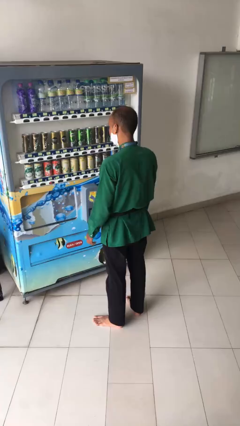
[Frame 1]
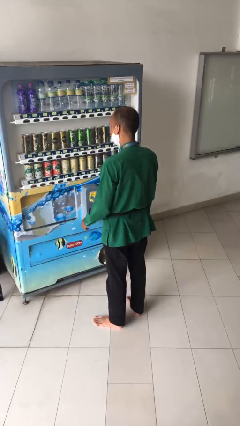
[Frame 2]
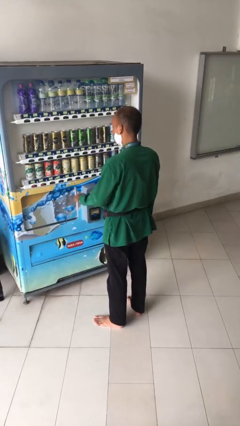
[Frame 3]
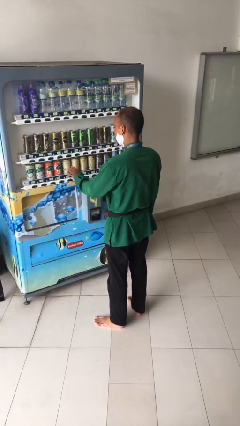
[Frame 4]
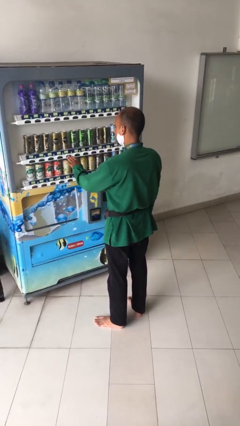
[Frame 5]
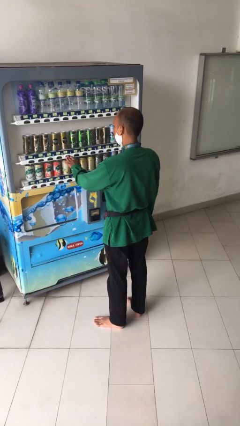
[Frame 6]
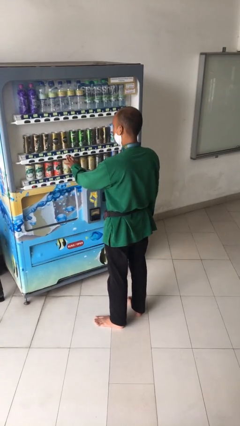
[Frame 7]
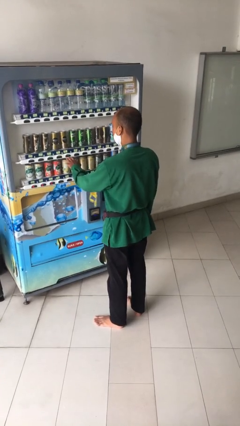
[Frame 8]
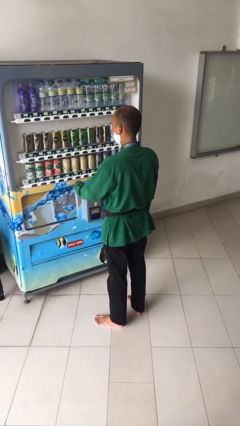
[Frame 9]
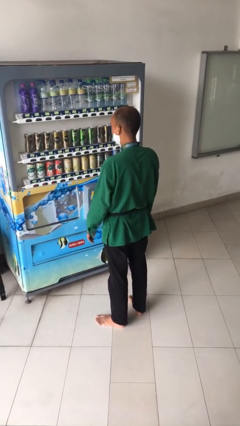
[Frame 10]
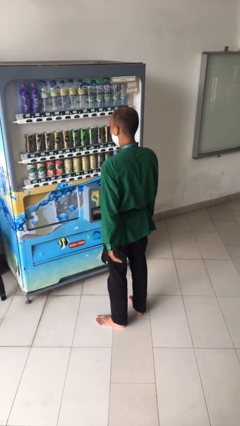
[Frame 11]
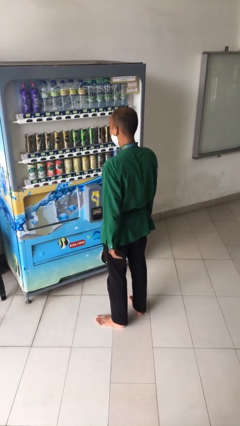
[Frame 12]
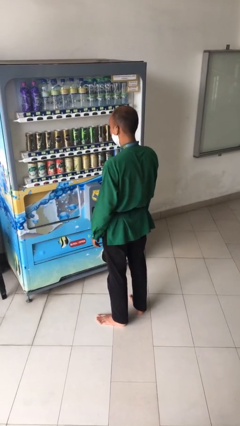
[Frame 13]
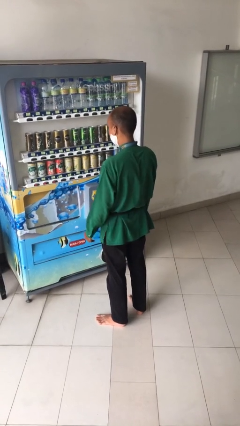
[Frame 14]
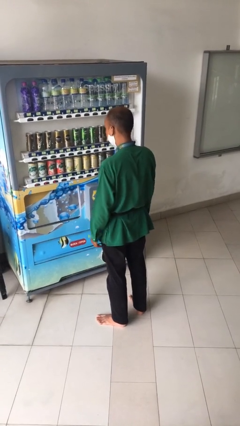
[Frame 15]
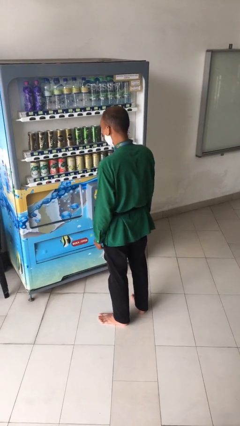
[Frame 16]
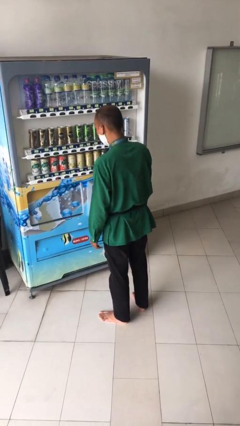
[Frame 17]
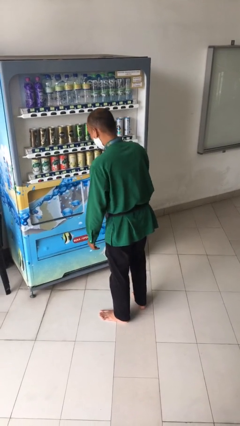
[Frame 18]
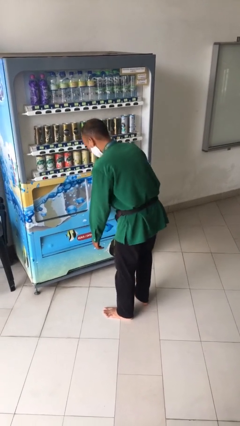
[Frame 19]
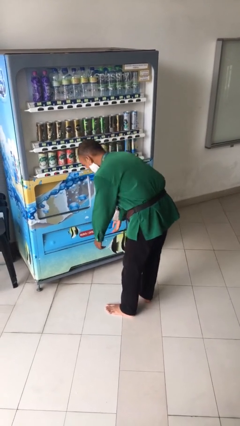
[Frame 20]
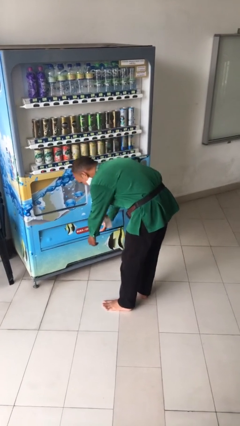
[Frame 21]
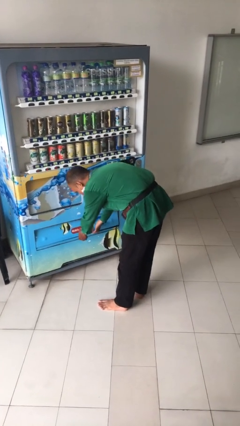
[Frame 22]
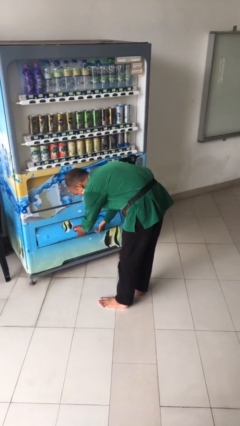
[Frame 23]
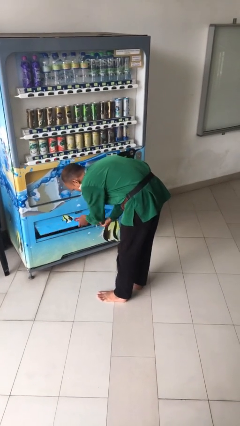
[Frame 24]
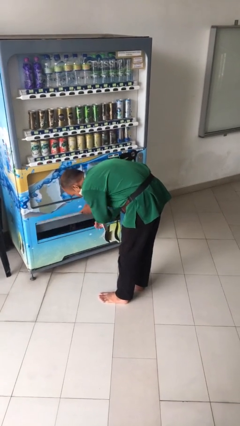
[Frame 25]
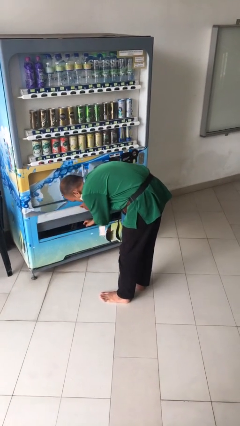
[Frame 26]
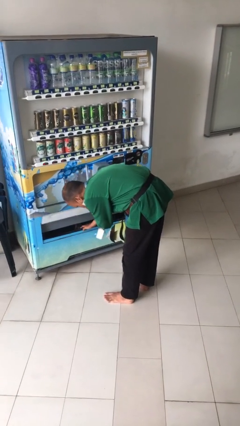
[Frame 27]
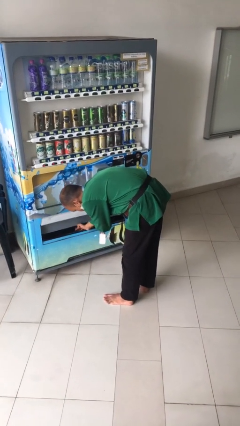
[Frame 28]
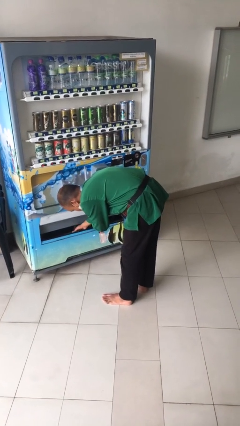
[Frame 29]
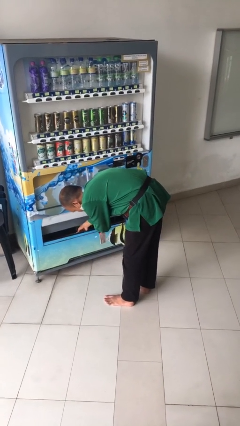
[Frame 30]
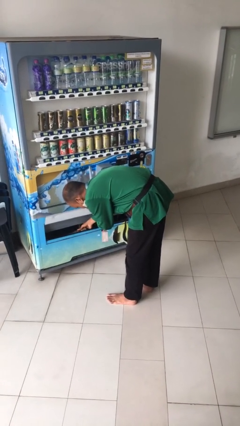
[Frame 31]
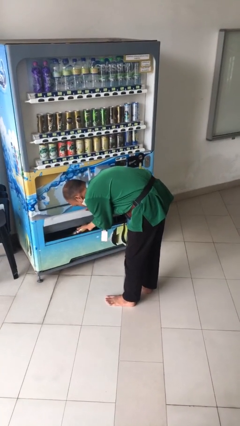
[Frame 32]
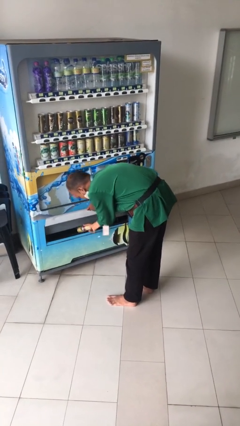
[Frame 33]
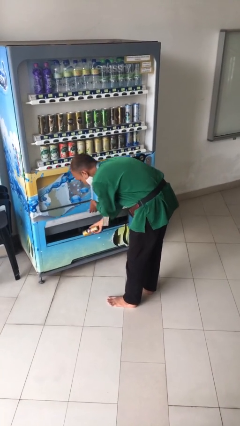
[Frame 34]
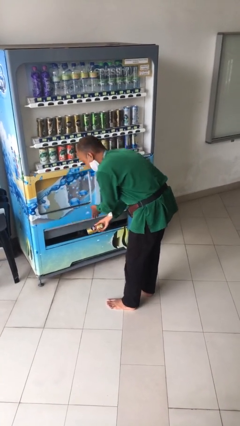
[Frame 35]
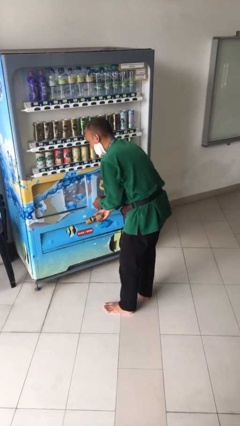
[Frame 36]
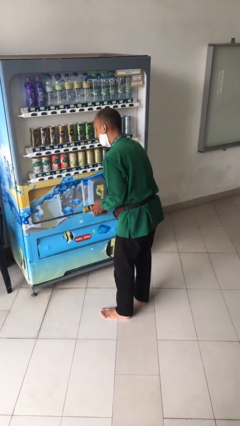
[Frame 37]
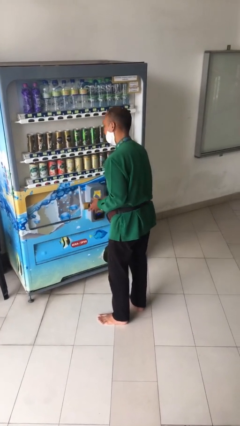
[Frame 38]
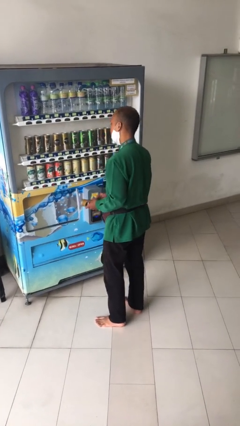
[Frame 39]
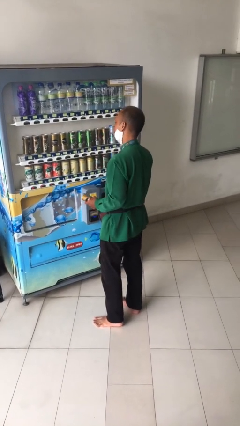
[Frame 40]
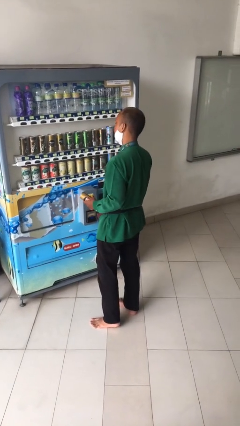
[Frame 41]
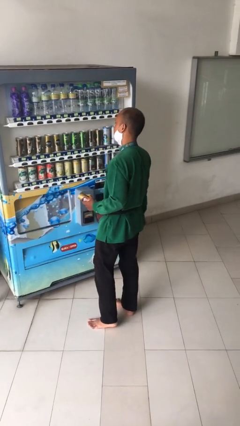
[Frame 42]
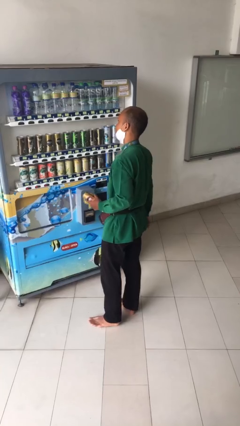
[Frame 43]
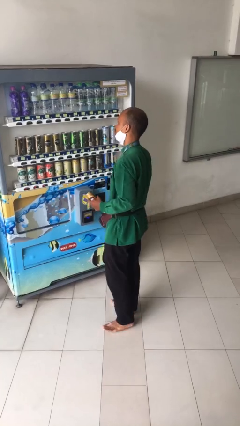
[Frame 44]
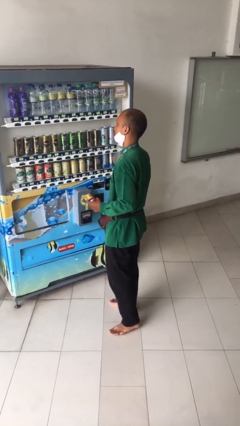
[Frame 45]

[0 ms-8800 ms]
person purchases from machine

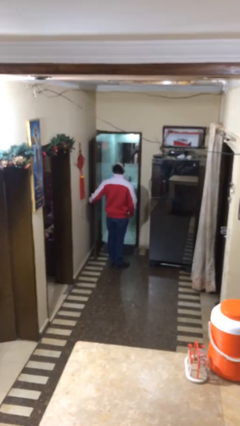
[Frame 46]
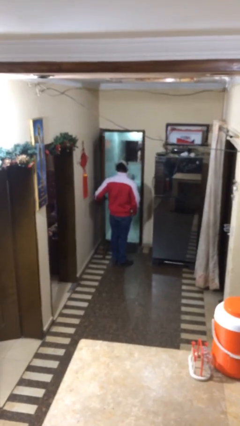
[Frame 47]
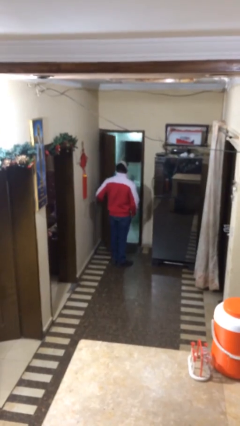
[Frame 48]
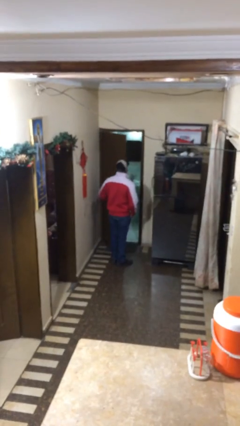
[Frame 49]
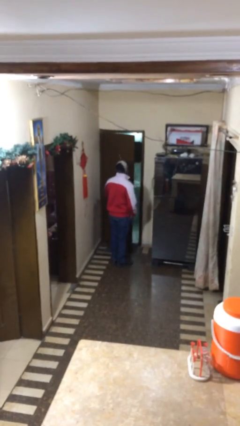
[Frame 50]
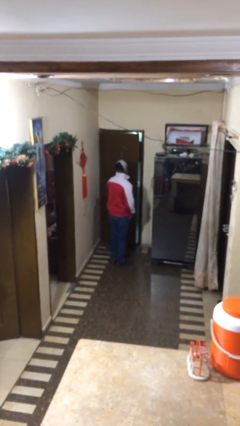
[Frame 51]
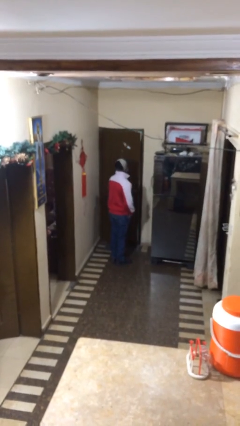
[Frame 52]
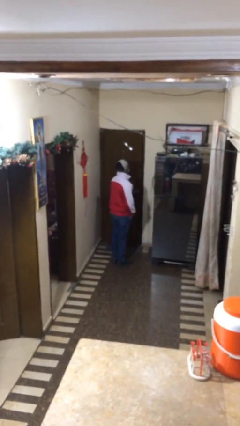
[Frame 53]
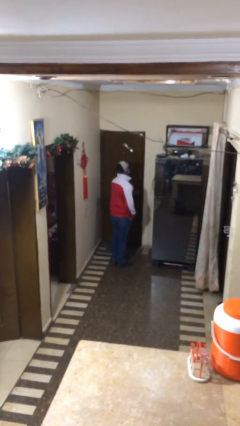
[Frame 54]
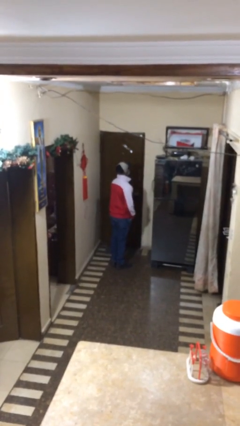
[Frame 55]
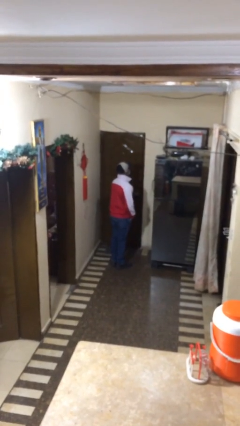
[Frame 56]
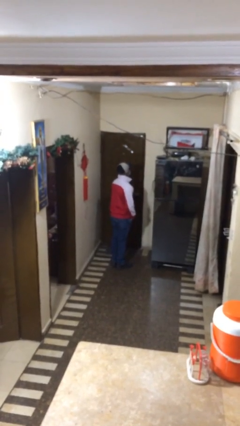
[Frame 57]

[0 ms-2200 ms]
person closes facility door

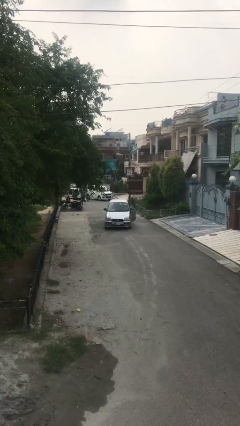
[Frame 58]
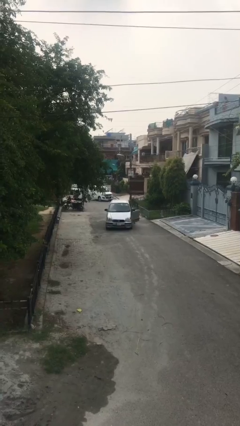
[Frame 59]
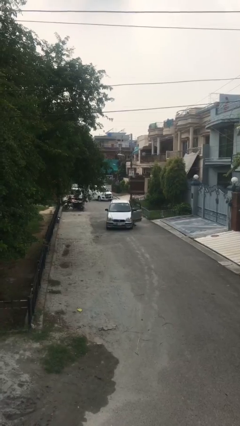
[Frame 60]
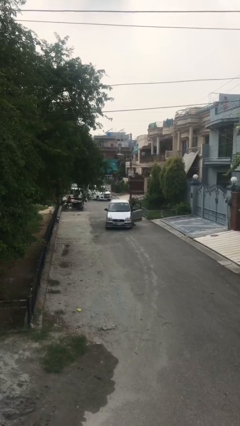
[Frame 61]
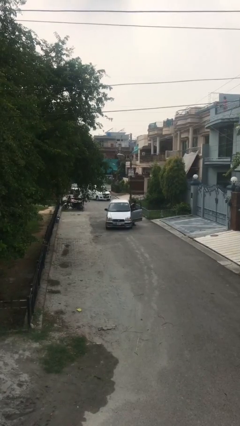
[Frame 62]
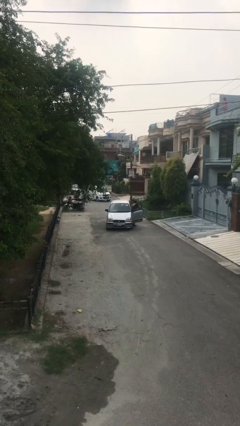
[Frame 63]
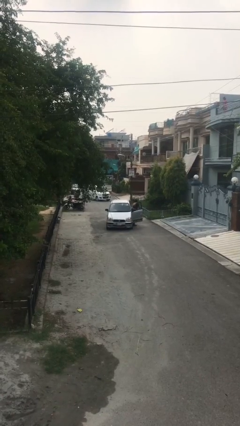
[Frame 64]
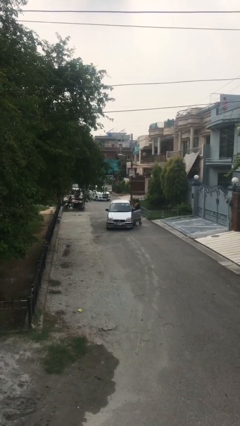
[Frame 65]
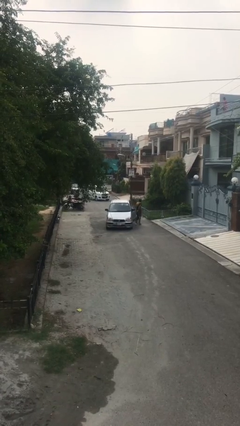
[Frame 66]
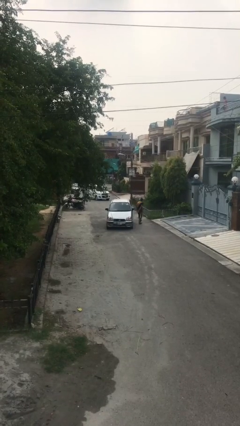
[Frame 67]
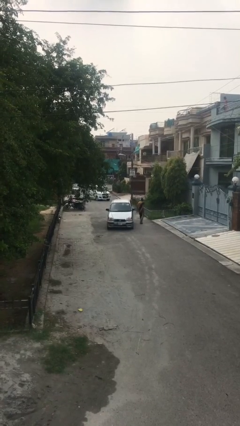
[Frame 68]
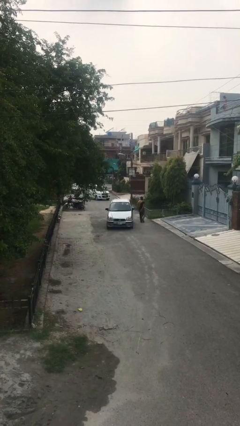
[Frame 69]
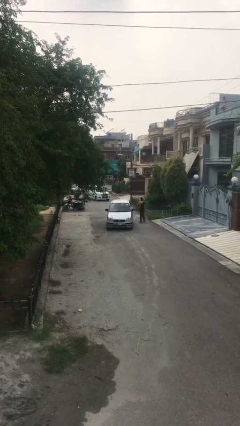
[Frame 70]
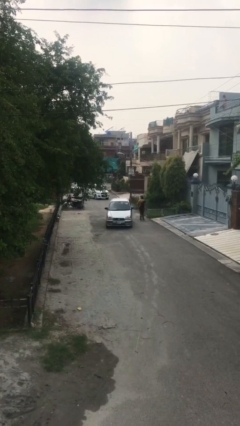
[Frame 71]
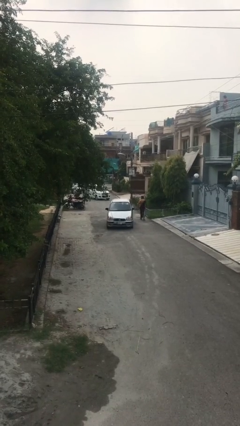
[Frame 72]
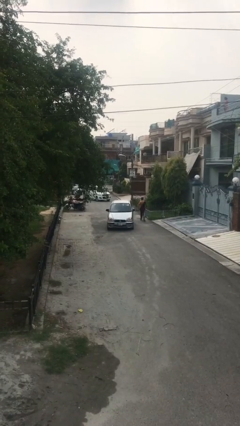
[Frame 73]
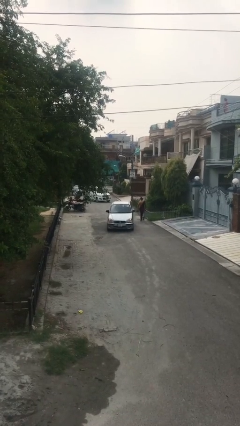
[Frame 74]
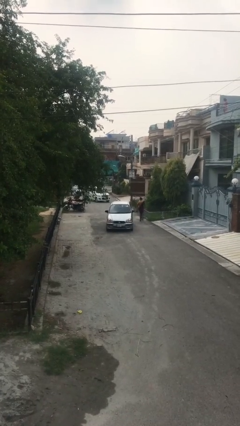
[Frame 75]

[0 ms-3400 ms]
car drops off person

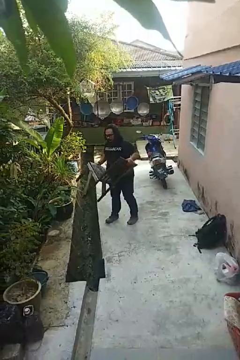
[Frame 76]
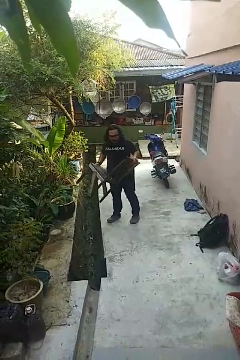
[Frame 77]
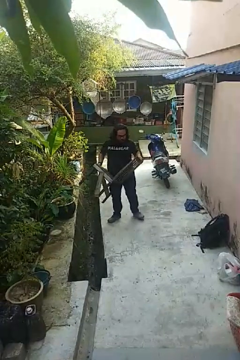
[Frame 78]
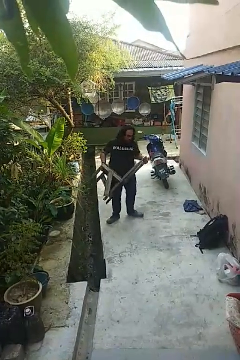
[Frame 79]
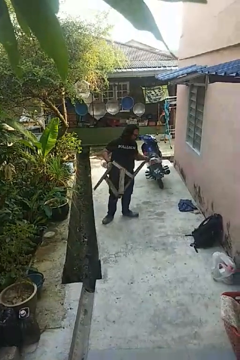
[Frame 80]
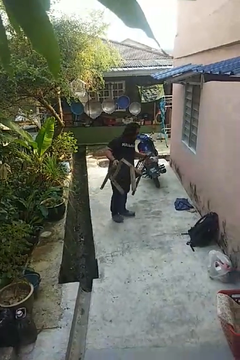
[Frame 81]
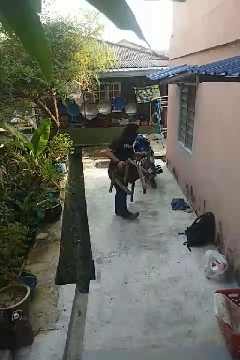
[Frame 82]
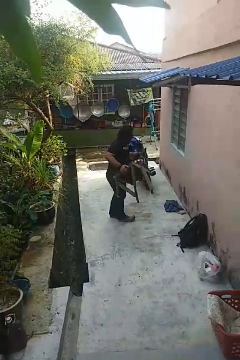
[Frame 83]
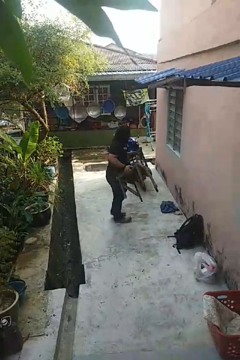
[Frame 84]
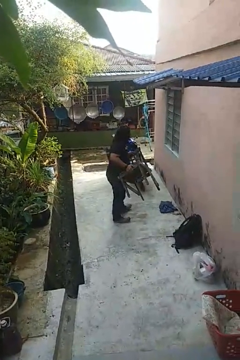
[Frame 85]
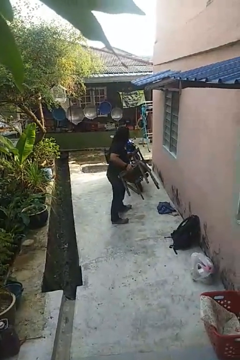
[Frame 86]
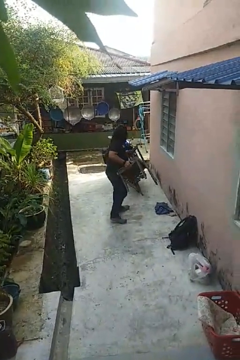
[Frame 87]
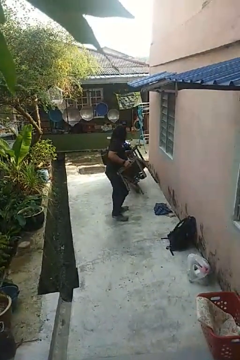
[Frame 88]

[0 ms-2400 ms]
person carries furniture

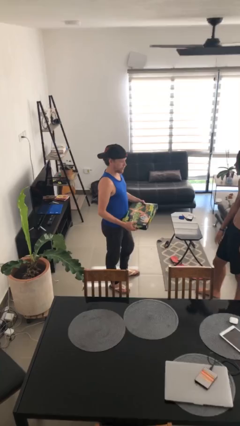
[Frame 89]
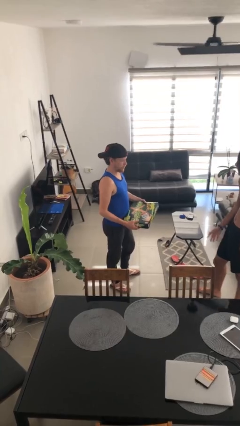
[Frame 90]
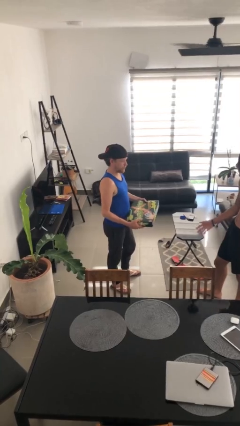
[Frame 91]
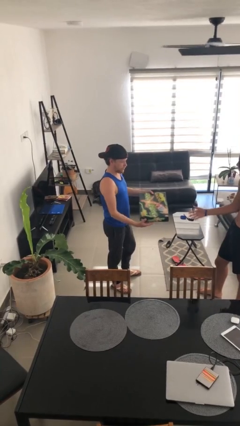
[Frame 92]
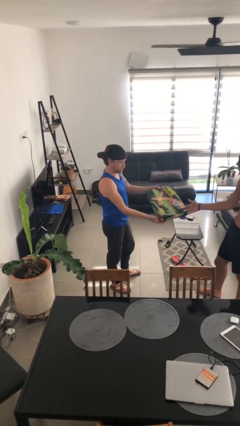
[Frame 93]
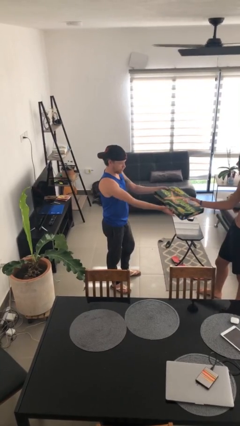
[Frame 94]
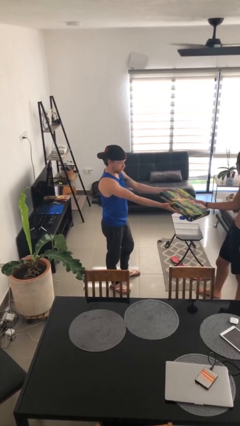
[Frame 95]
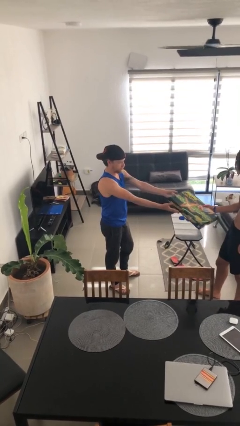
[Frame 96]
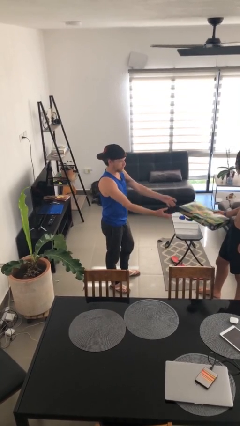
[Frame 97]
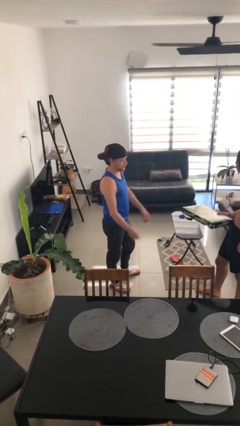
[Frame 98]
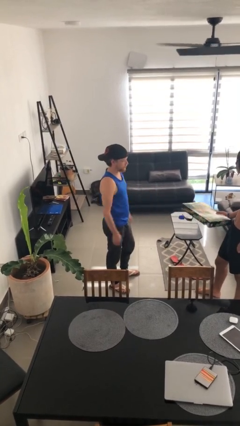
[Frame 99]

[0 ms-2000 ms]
person transfers object to person
